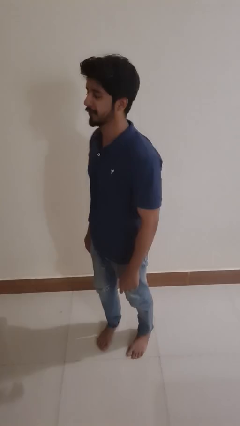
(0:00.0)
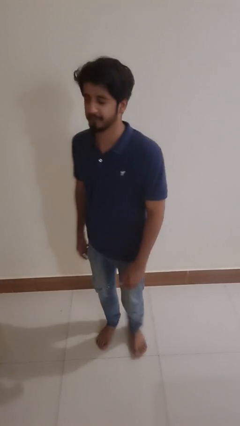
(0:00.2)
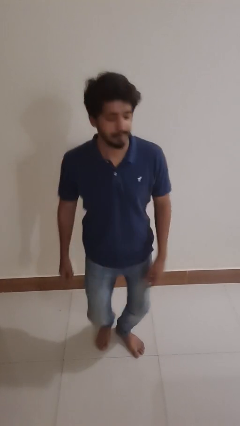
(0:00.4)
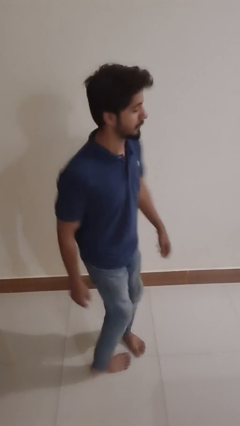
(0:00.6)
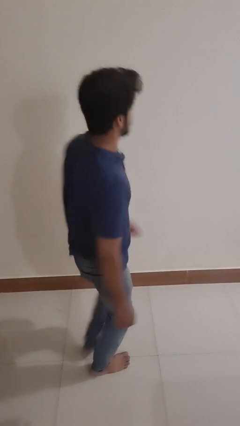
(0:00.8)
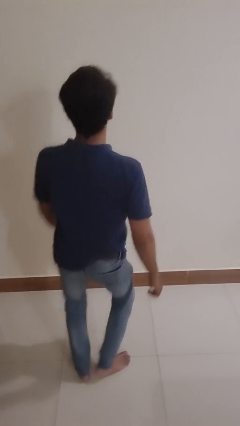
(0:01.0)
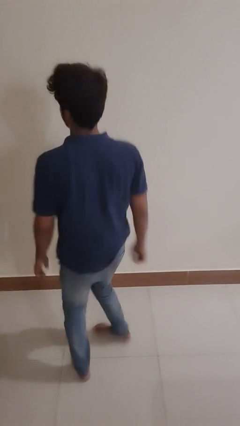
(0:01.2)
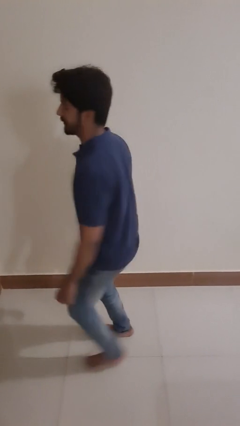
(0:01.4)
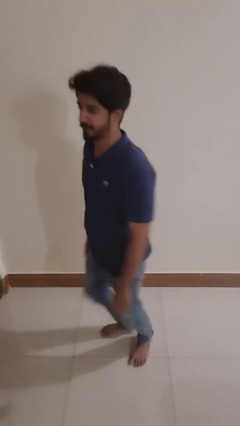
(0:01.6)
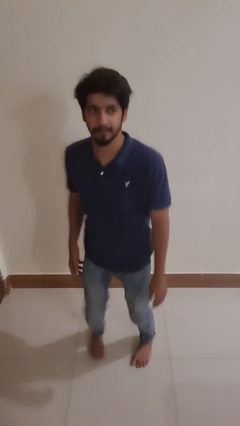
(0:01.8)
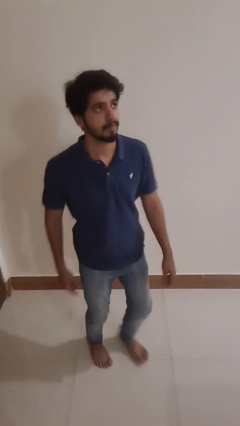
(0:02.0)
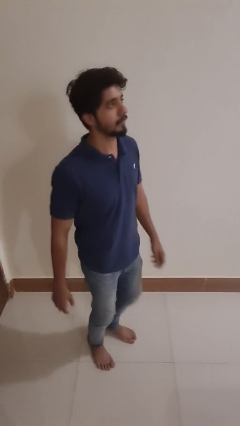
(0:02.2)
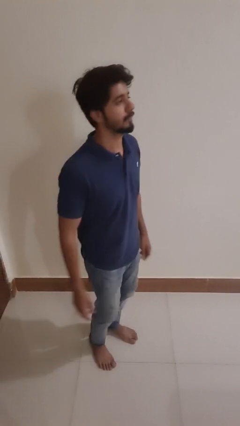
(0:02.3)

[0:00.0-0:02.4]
person twirls

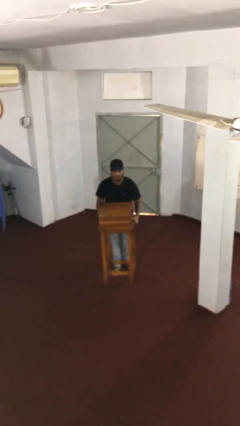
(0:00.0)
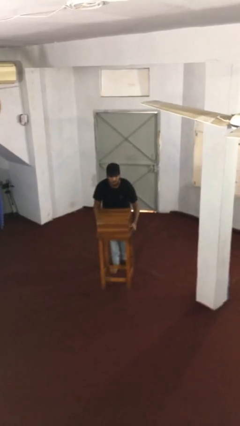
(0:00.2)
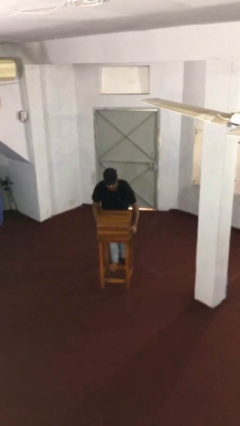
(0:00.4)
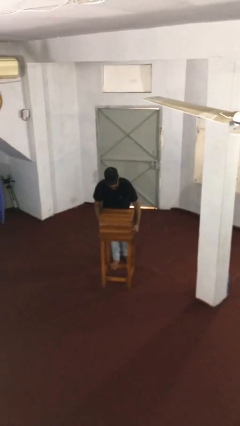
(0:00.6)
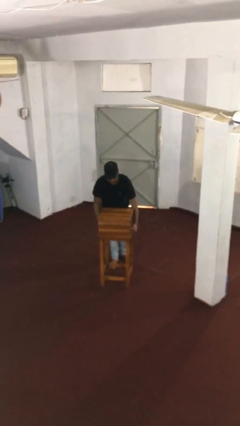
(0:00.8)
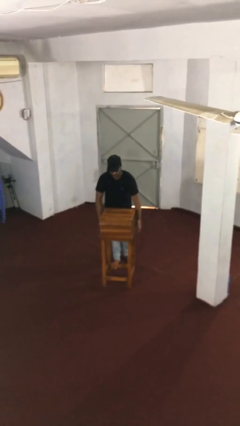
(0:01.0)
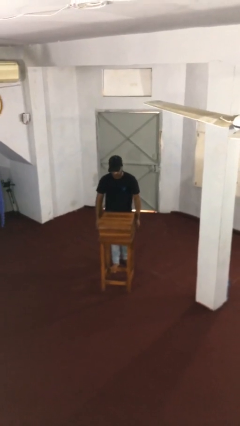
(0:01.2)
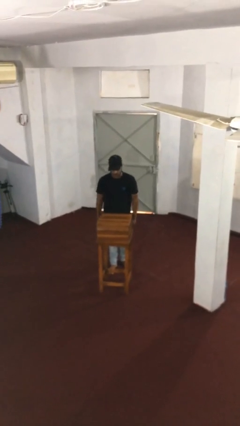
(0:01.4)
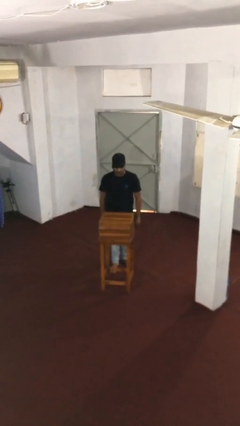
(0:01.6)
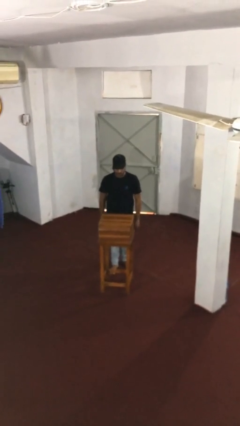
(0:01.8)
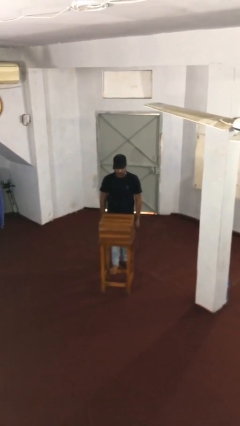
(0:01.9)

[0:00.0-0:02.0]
person puts down object on floor

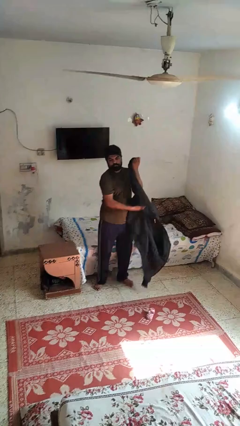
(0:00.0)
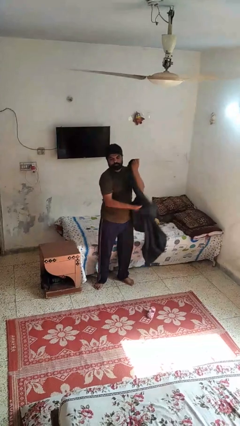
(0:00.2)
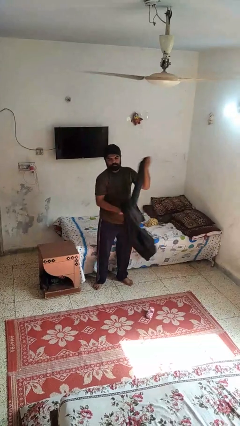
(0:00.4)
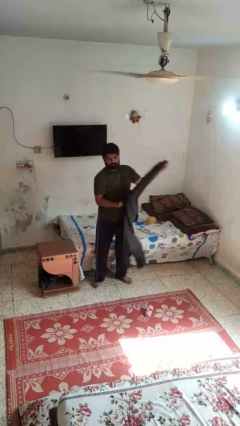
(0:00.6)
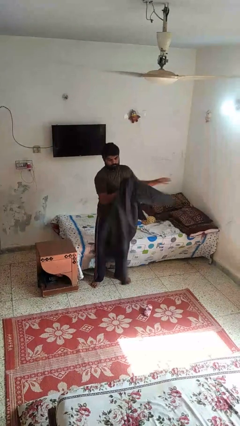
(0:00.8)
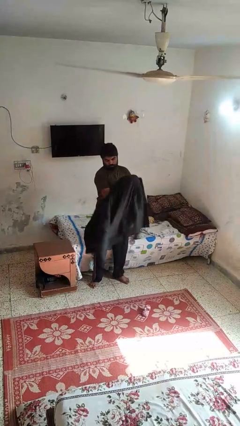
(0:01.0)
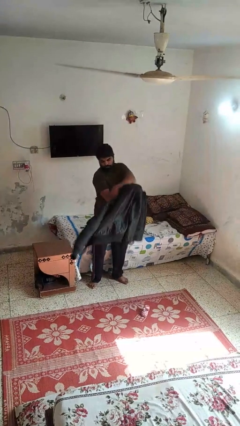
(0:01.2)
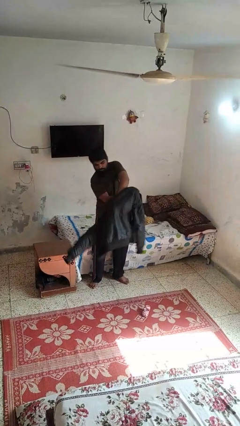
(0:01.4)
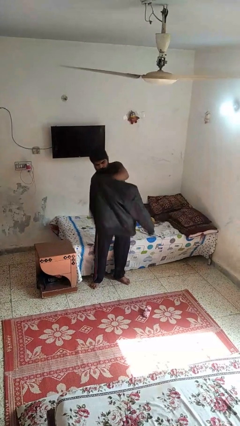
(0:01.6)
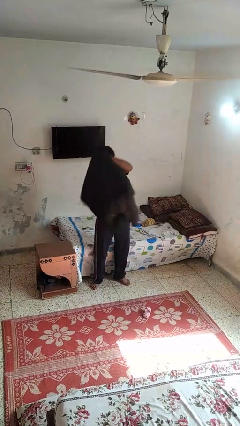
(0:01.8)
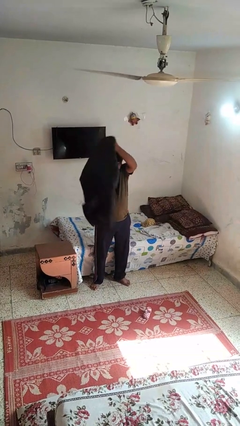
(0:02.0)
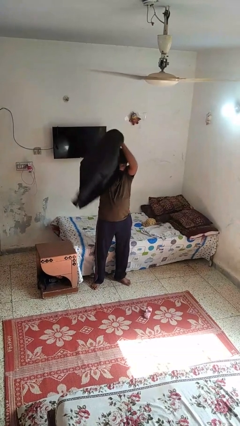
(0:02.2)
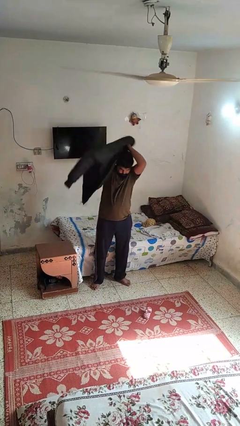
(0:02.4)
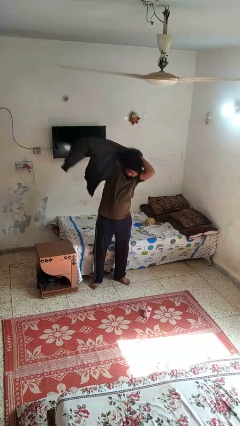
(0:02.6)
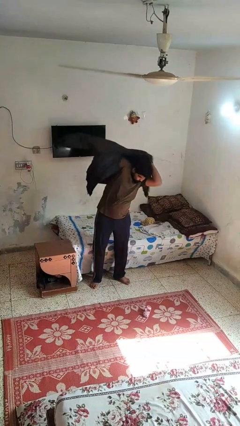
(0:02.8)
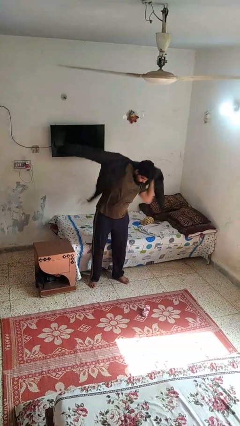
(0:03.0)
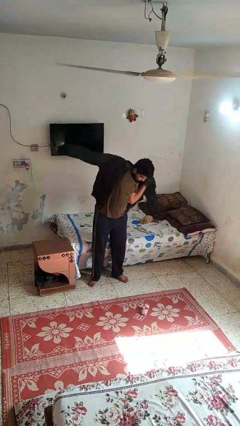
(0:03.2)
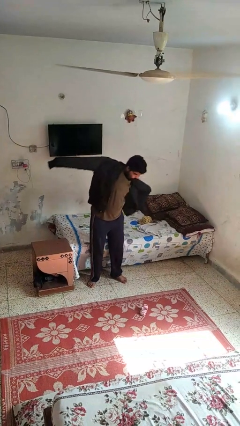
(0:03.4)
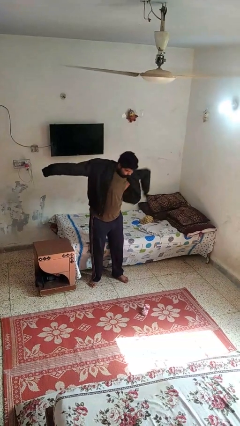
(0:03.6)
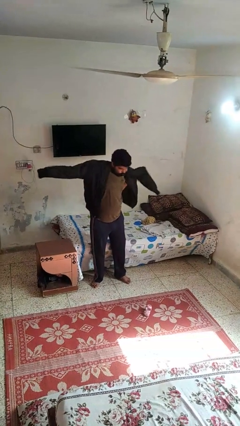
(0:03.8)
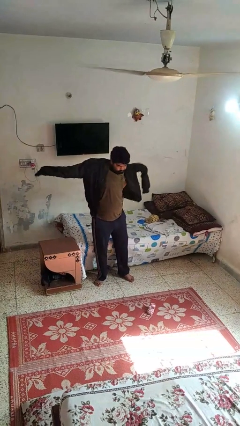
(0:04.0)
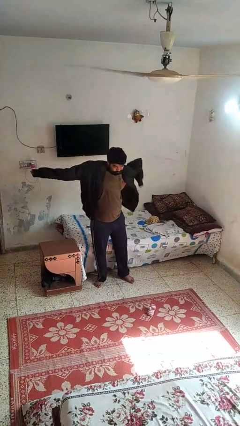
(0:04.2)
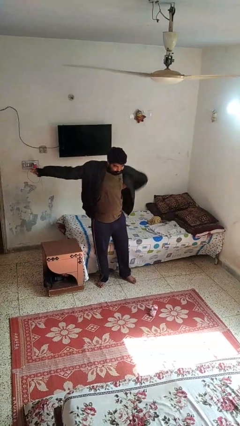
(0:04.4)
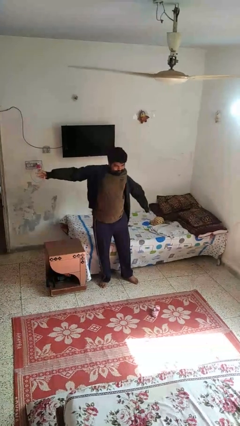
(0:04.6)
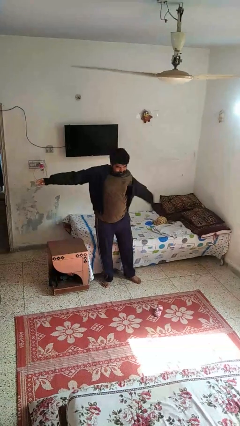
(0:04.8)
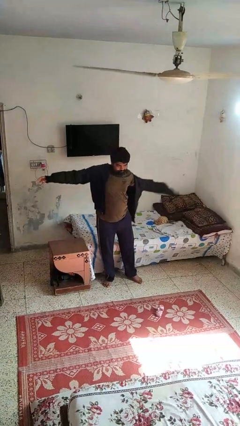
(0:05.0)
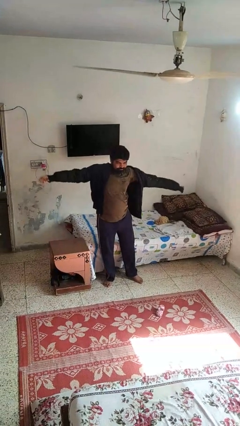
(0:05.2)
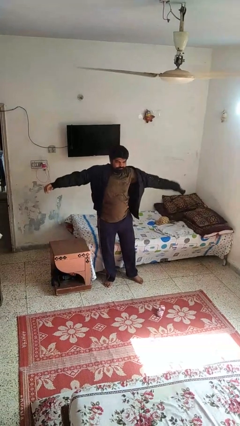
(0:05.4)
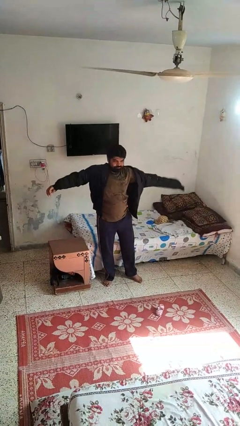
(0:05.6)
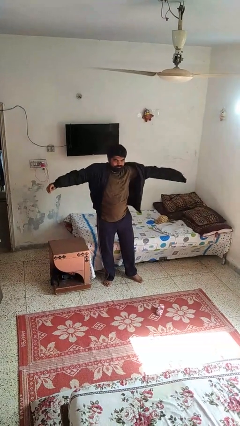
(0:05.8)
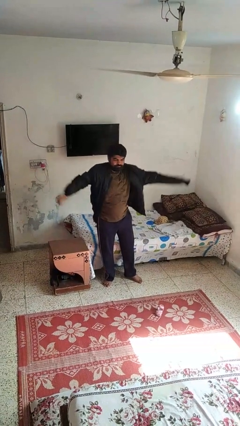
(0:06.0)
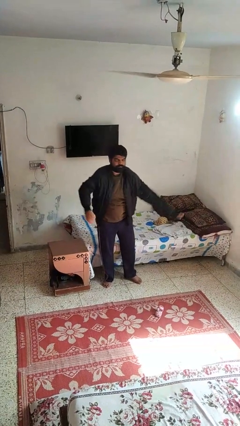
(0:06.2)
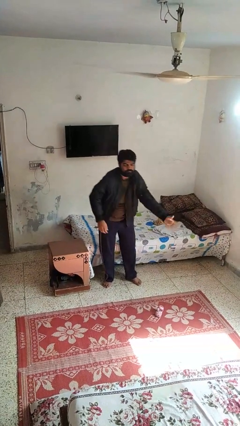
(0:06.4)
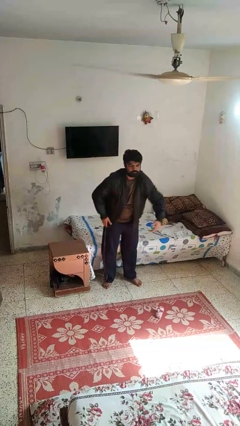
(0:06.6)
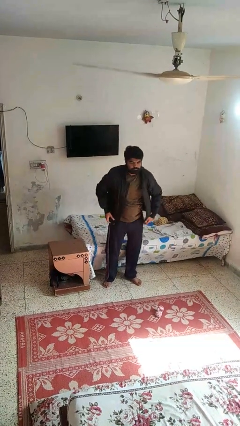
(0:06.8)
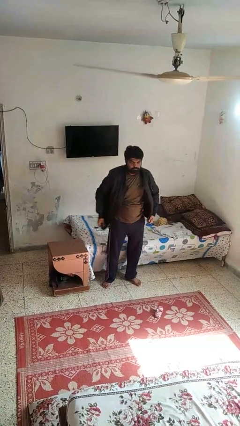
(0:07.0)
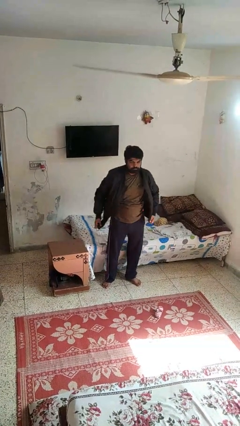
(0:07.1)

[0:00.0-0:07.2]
person puts on jacket

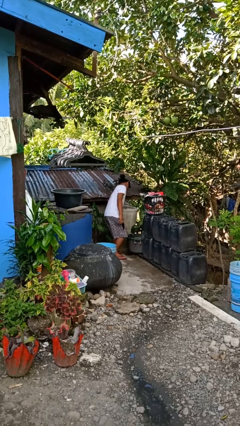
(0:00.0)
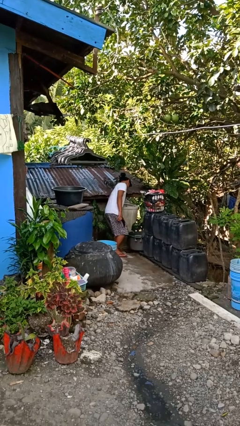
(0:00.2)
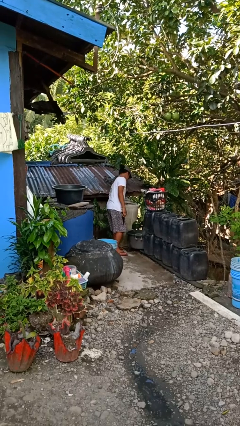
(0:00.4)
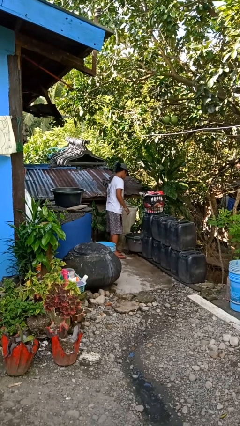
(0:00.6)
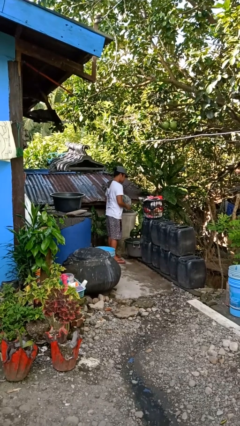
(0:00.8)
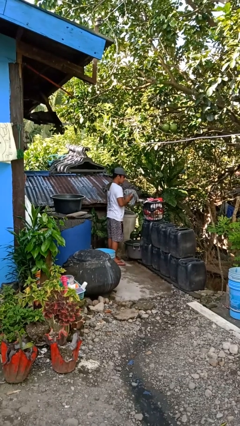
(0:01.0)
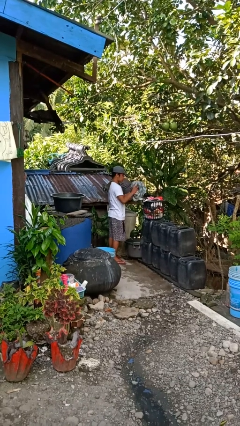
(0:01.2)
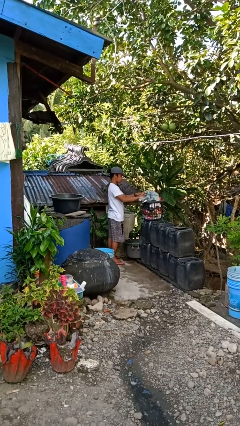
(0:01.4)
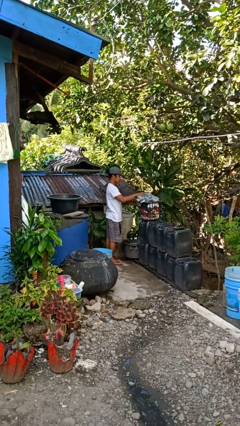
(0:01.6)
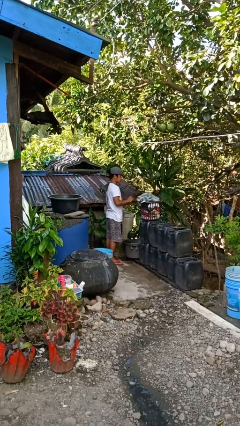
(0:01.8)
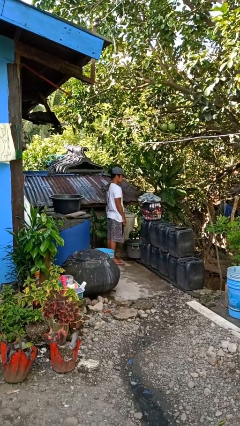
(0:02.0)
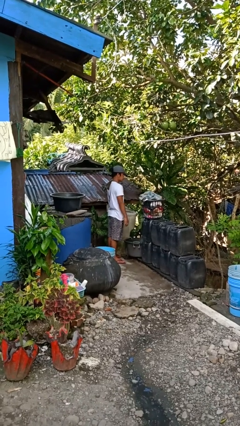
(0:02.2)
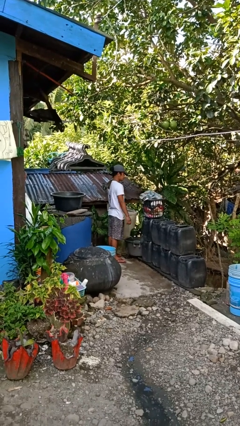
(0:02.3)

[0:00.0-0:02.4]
person unloads dryer

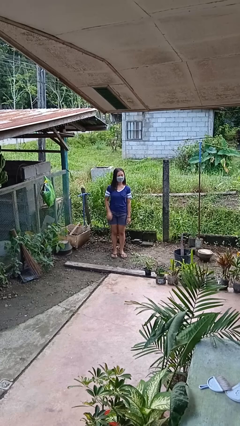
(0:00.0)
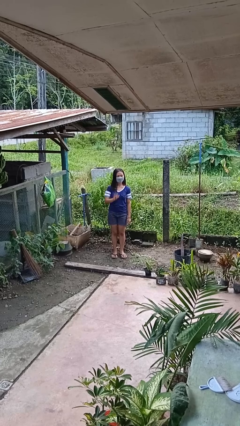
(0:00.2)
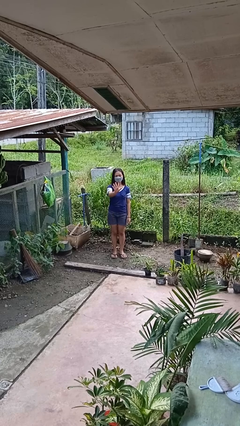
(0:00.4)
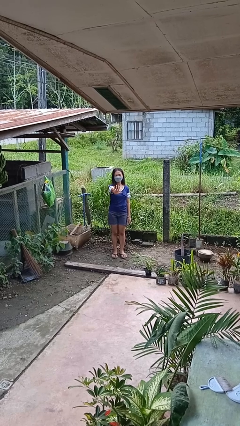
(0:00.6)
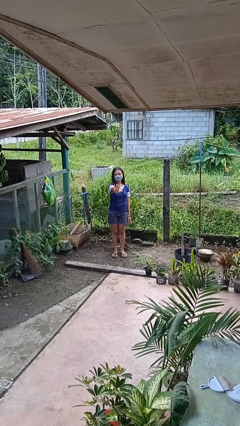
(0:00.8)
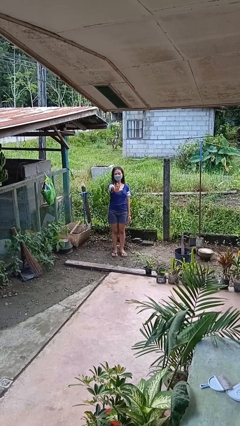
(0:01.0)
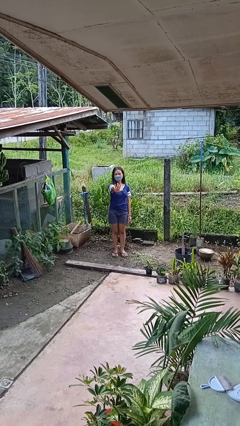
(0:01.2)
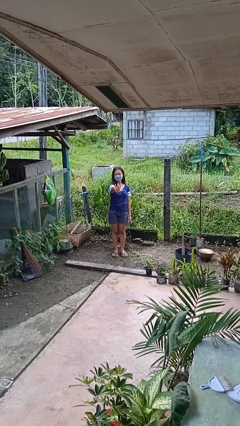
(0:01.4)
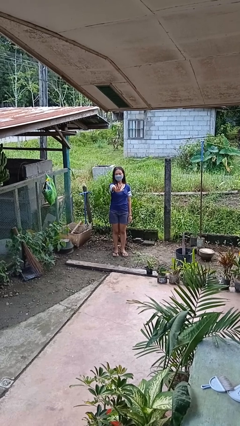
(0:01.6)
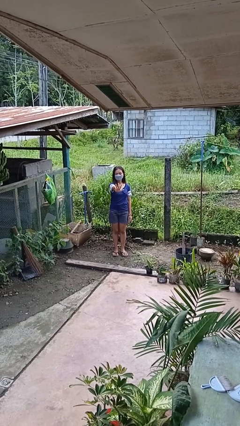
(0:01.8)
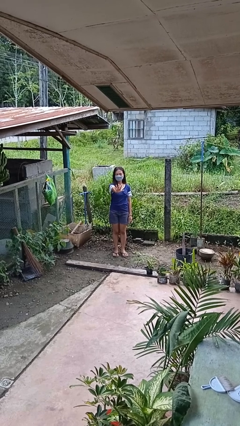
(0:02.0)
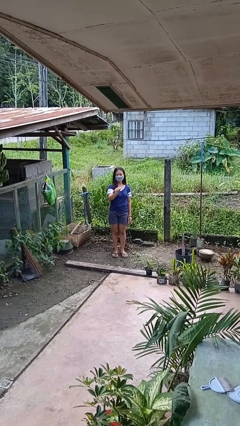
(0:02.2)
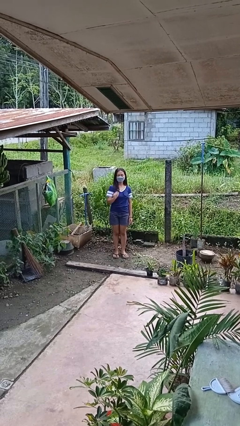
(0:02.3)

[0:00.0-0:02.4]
person gestures number five

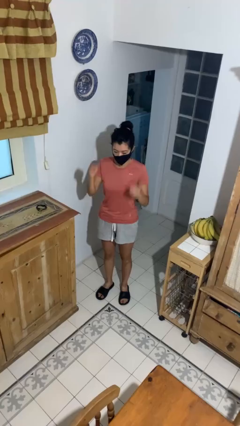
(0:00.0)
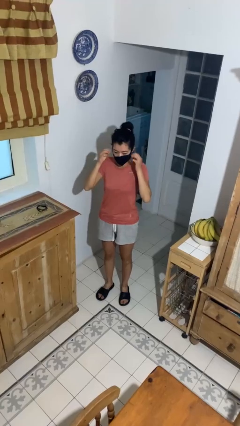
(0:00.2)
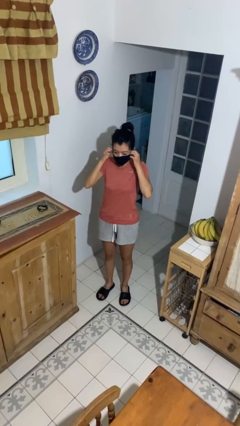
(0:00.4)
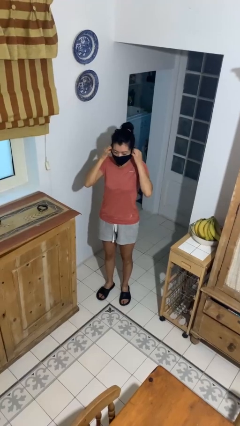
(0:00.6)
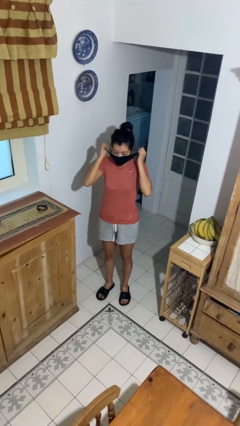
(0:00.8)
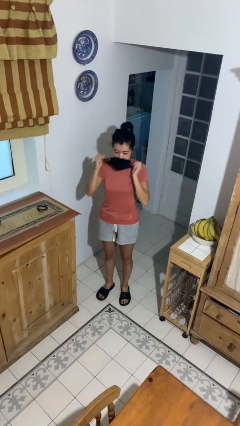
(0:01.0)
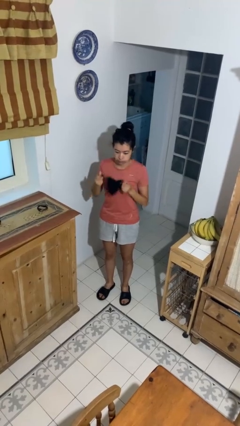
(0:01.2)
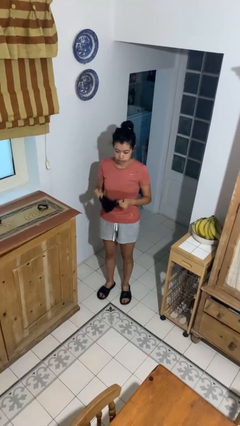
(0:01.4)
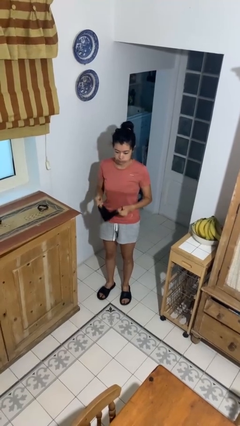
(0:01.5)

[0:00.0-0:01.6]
person takes off facemask
